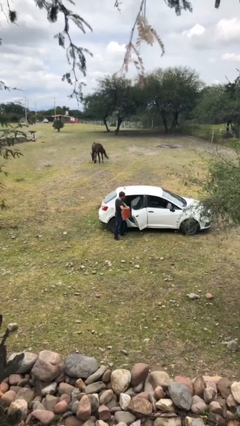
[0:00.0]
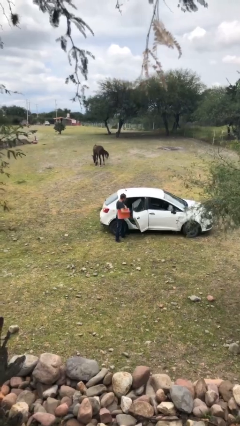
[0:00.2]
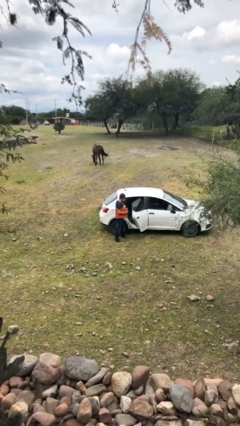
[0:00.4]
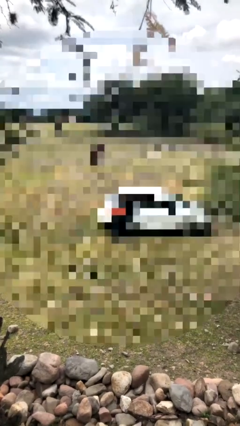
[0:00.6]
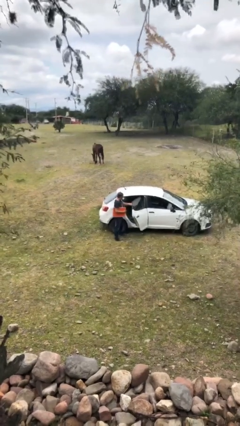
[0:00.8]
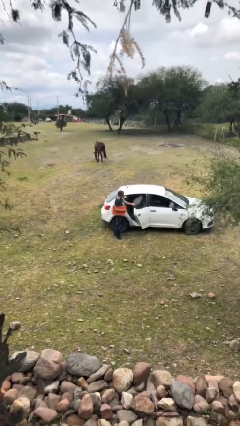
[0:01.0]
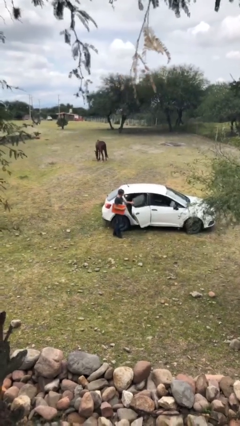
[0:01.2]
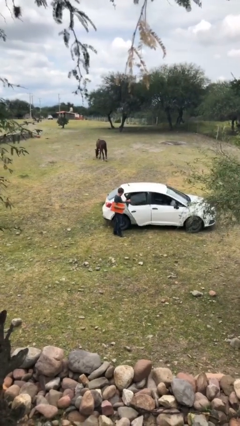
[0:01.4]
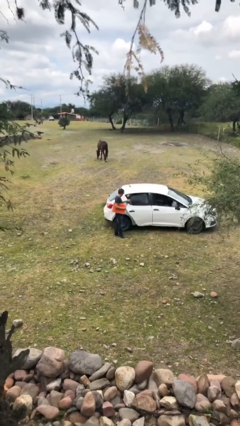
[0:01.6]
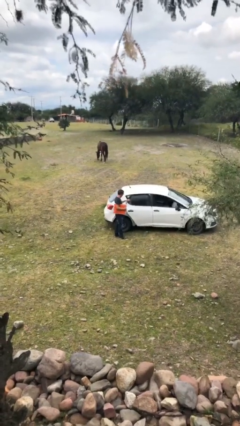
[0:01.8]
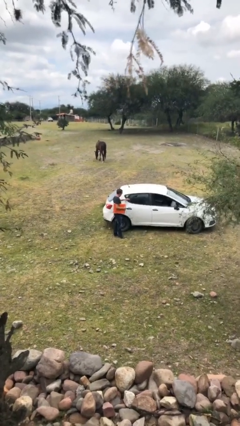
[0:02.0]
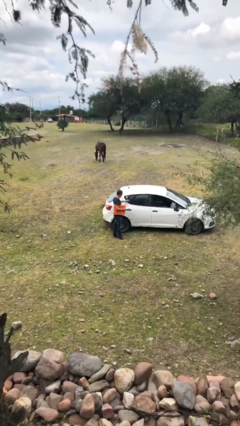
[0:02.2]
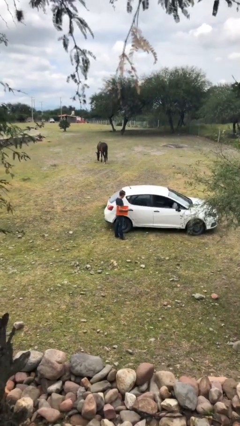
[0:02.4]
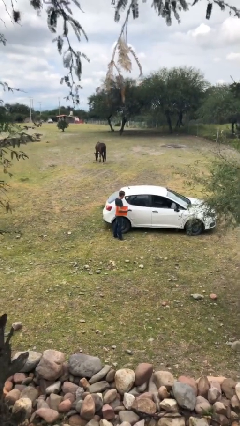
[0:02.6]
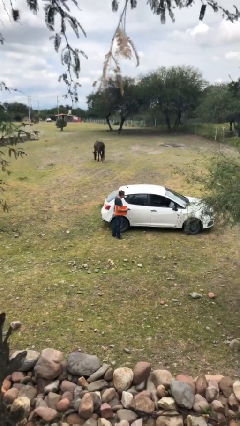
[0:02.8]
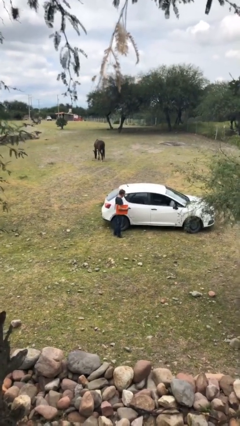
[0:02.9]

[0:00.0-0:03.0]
person closes car door

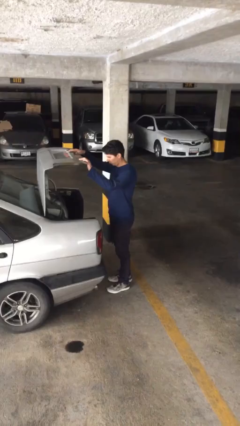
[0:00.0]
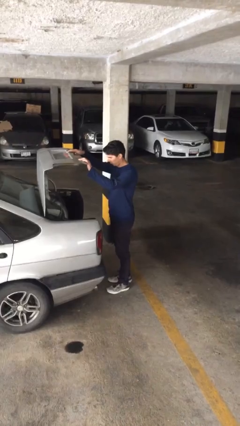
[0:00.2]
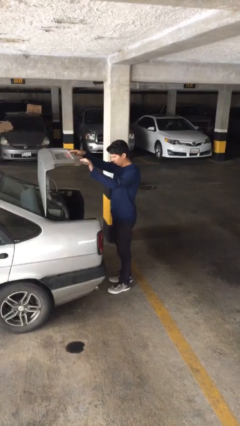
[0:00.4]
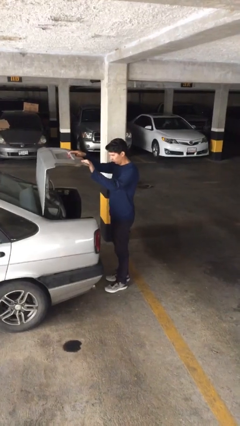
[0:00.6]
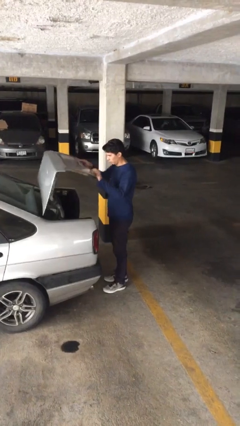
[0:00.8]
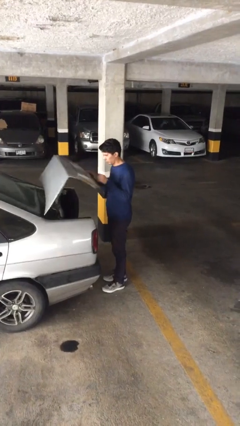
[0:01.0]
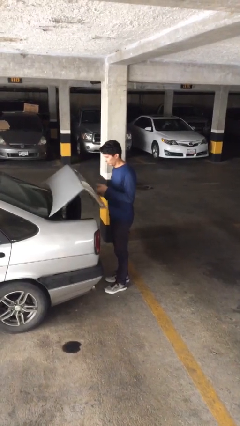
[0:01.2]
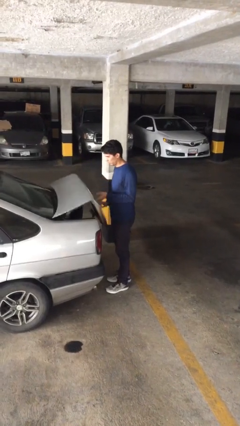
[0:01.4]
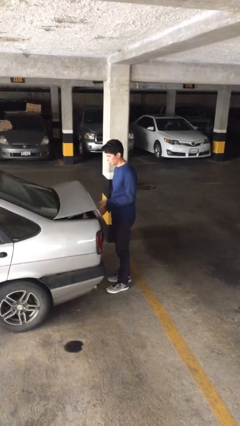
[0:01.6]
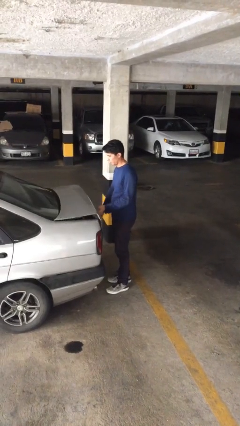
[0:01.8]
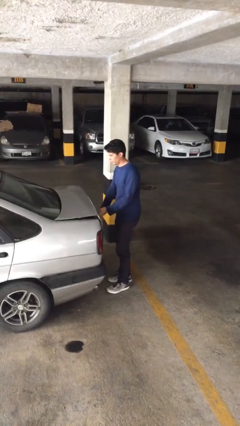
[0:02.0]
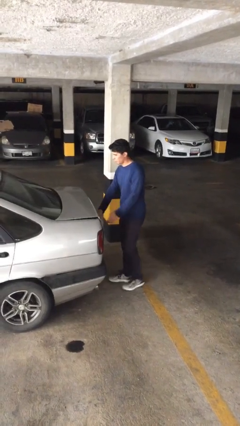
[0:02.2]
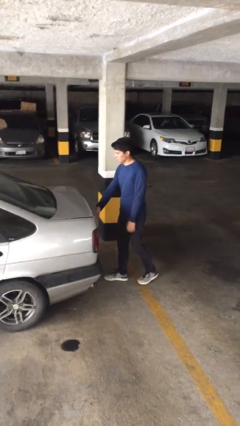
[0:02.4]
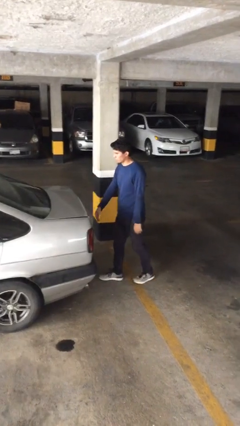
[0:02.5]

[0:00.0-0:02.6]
person closes car trunk

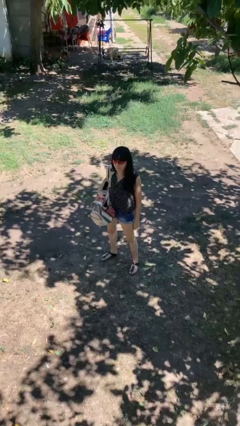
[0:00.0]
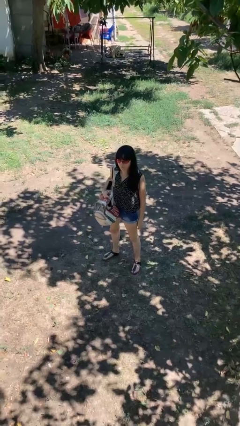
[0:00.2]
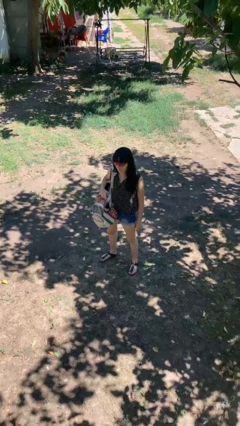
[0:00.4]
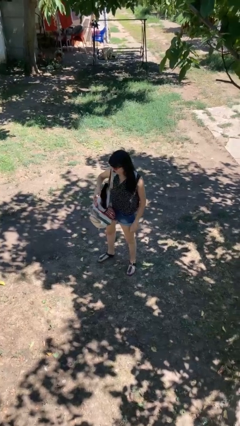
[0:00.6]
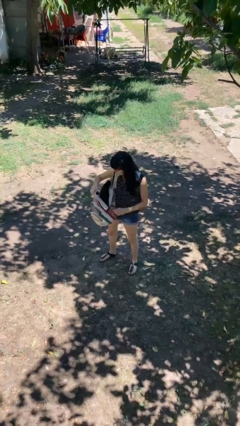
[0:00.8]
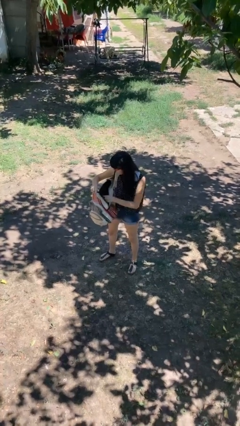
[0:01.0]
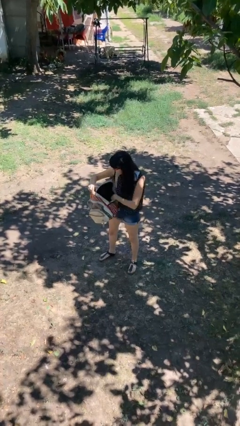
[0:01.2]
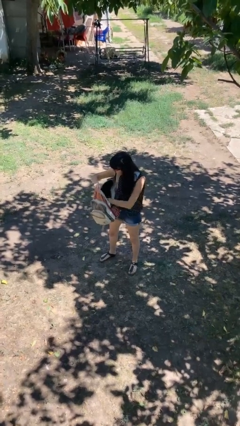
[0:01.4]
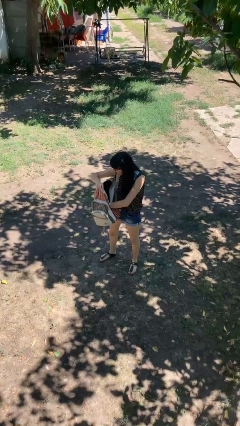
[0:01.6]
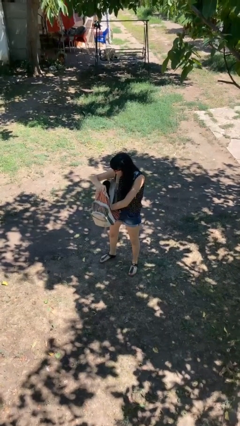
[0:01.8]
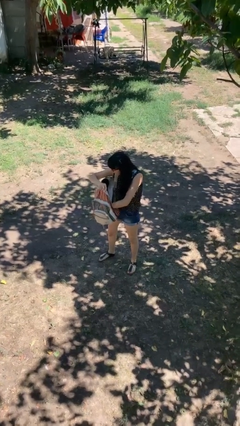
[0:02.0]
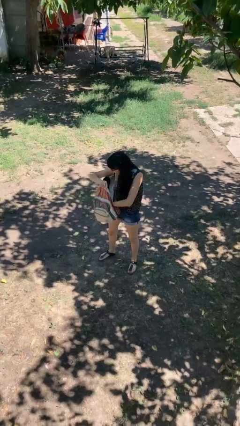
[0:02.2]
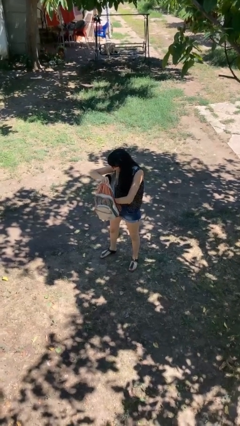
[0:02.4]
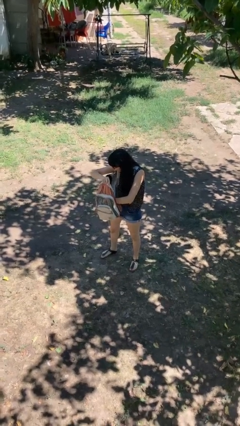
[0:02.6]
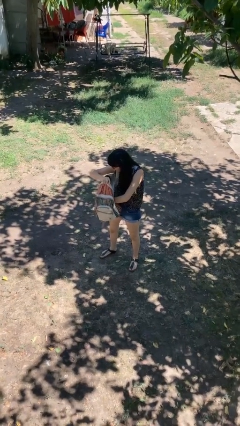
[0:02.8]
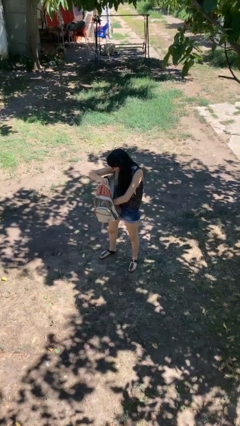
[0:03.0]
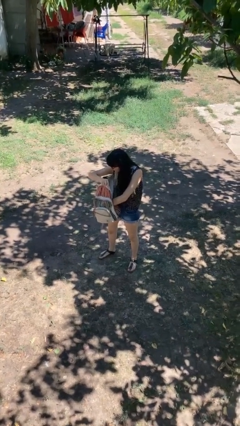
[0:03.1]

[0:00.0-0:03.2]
person searches in backpack

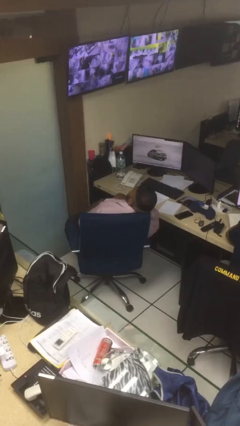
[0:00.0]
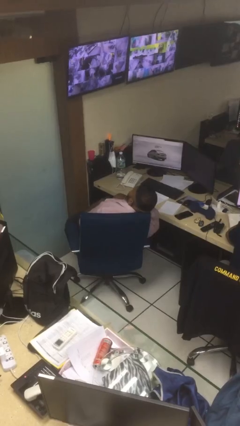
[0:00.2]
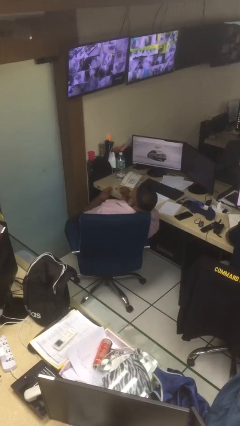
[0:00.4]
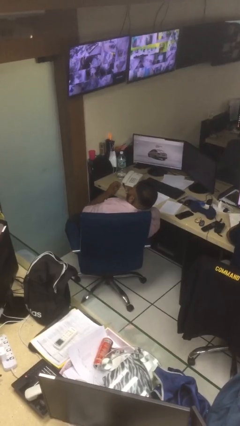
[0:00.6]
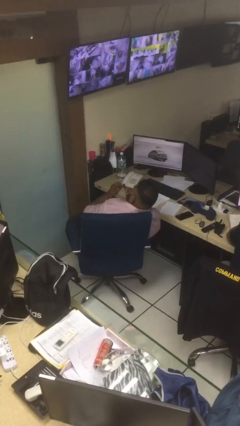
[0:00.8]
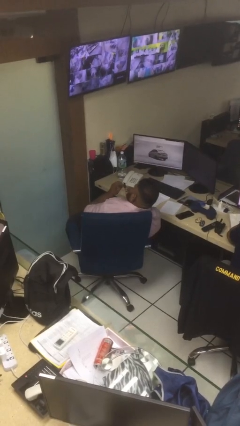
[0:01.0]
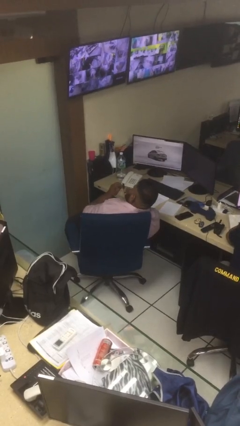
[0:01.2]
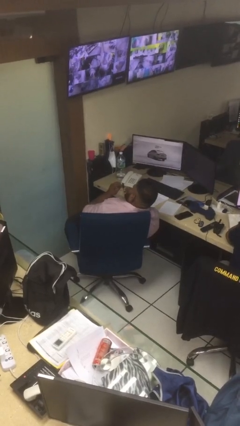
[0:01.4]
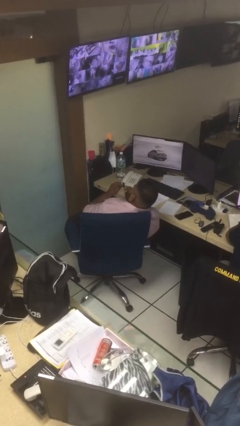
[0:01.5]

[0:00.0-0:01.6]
person files fingernails

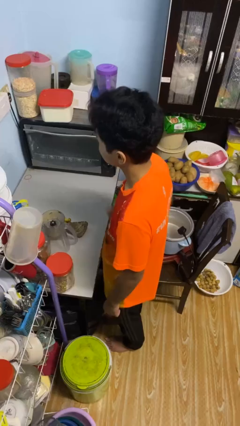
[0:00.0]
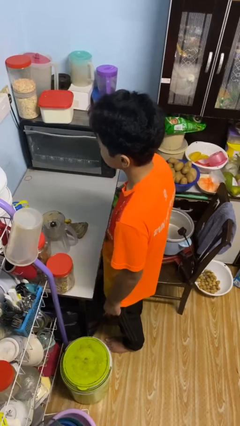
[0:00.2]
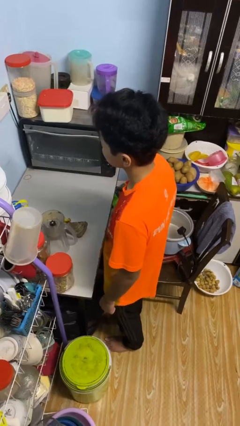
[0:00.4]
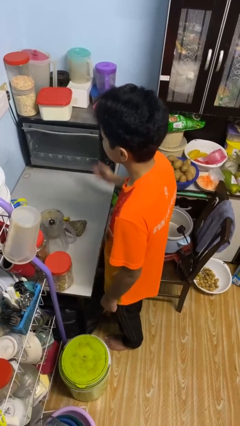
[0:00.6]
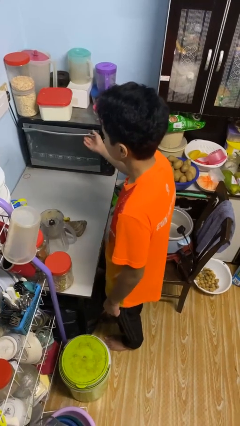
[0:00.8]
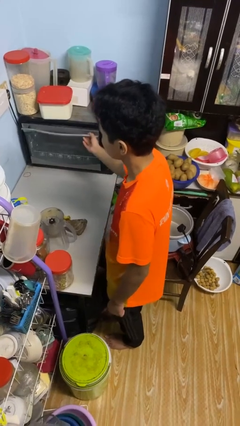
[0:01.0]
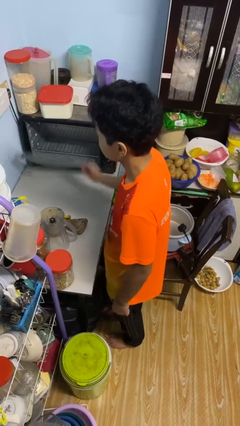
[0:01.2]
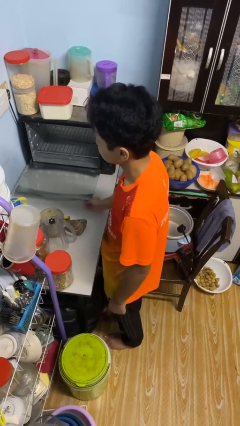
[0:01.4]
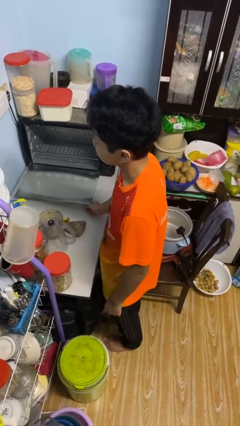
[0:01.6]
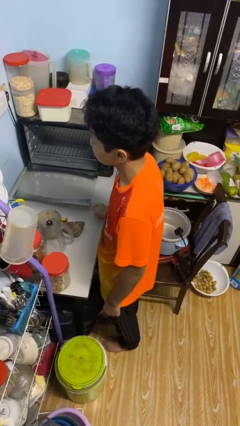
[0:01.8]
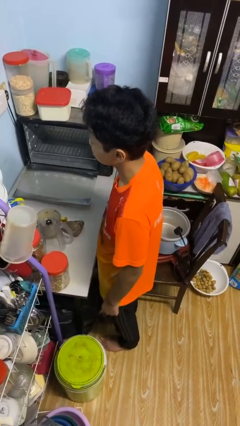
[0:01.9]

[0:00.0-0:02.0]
person opens oven door

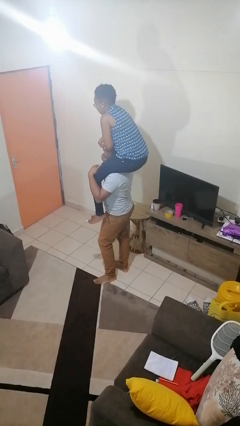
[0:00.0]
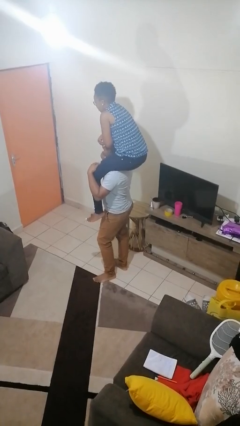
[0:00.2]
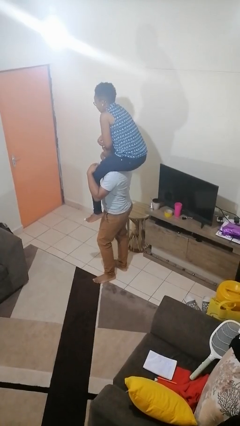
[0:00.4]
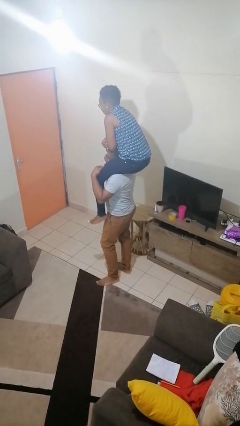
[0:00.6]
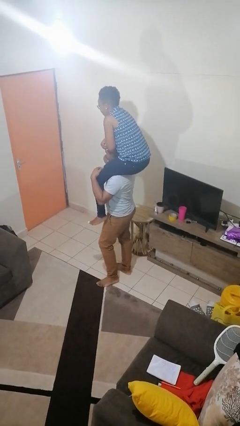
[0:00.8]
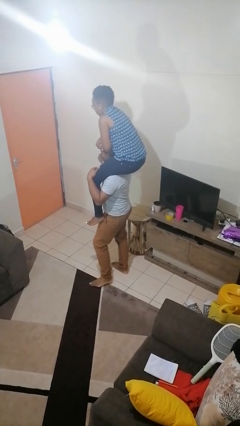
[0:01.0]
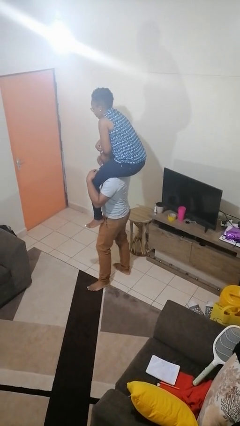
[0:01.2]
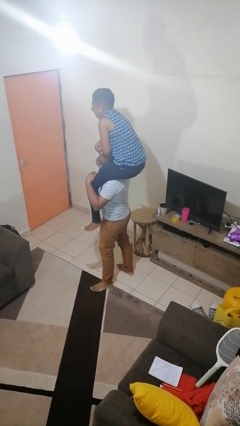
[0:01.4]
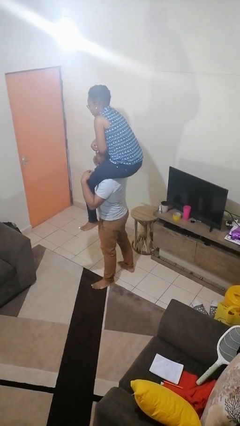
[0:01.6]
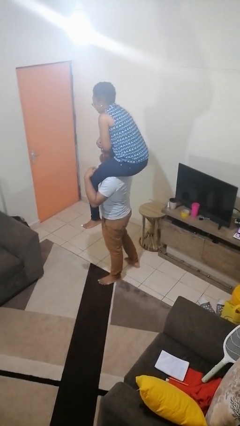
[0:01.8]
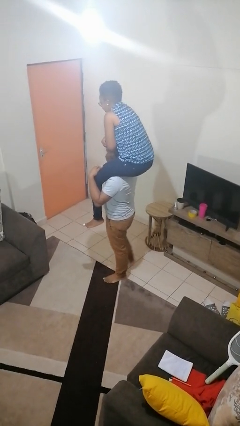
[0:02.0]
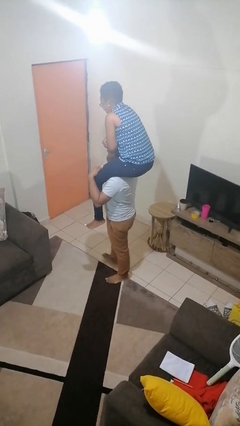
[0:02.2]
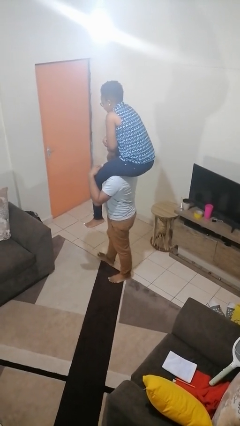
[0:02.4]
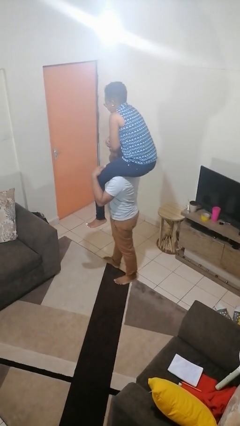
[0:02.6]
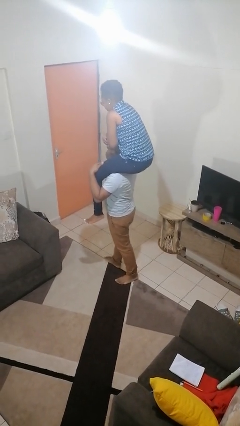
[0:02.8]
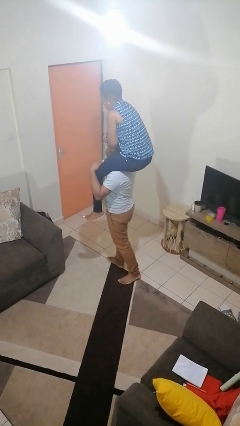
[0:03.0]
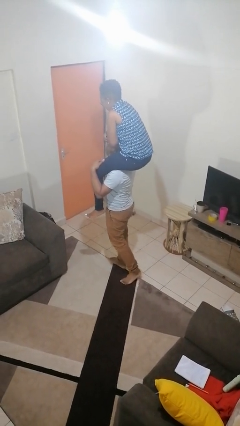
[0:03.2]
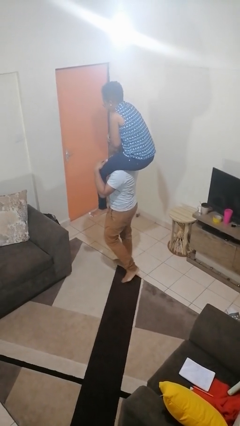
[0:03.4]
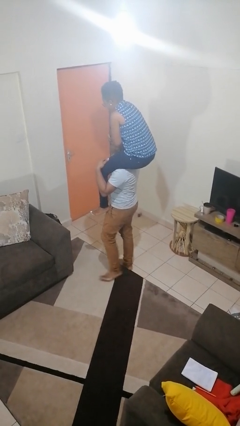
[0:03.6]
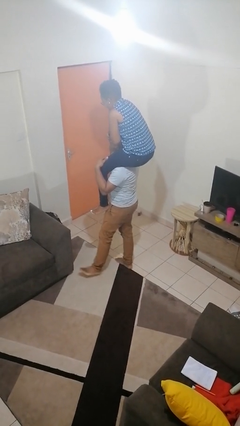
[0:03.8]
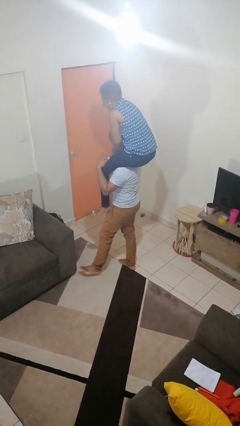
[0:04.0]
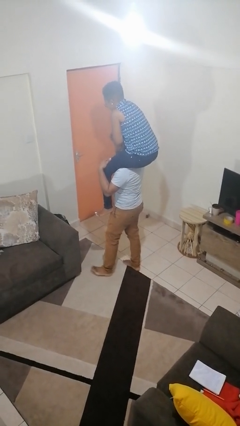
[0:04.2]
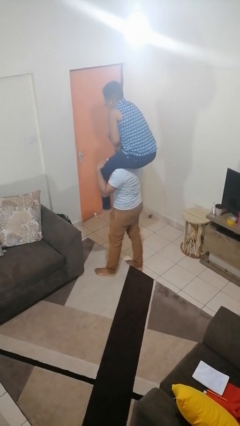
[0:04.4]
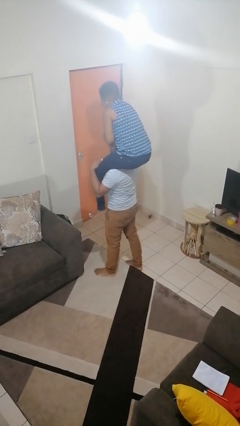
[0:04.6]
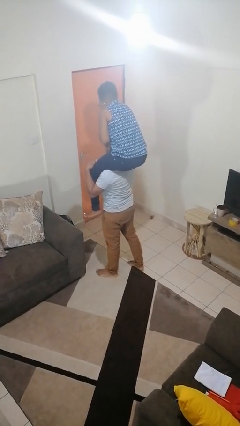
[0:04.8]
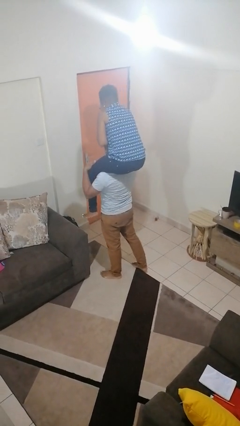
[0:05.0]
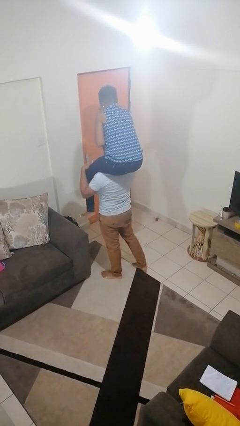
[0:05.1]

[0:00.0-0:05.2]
person carries person on shoulders
